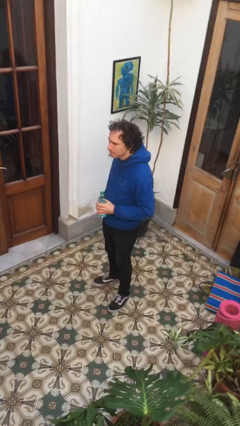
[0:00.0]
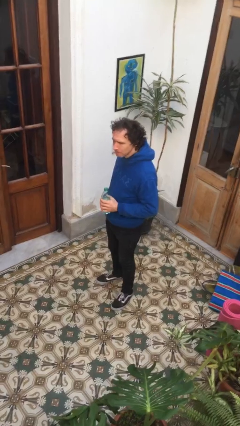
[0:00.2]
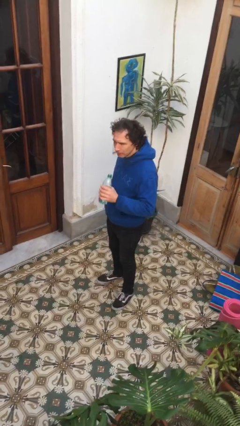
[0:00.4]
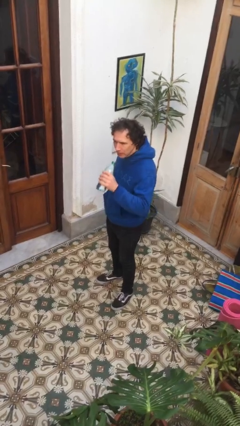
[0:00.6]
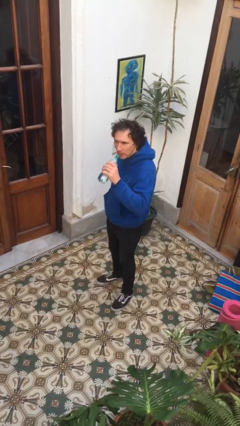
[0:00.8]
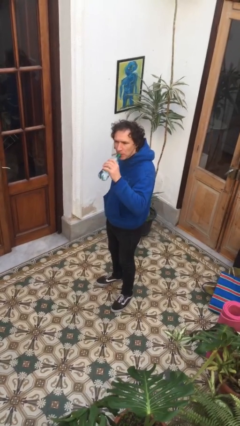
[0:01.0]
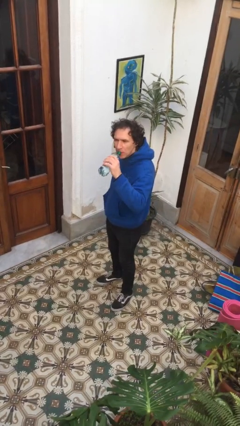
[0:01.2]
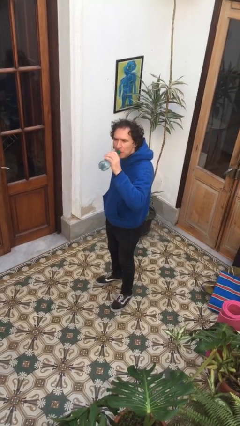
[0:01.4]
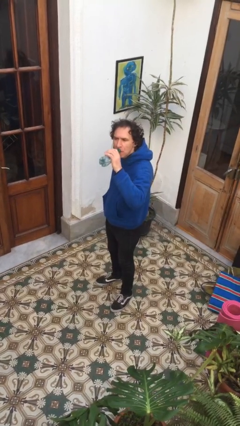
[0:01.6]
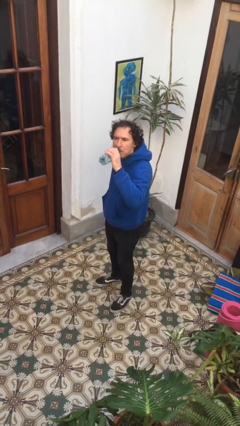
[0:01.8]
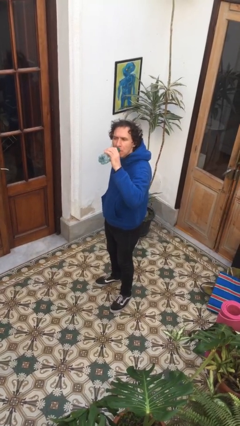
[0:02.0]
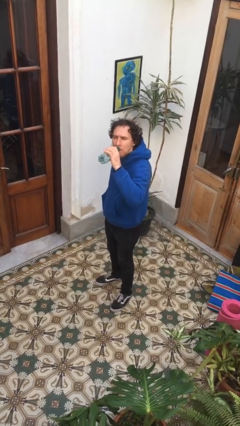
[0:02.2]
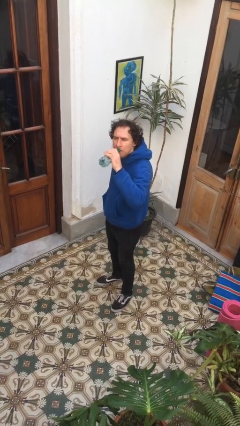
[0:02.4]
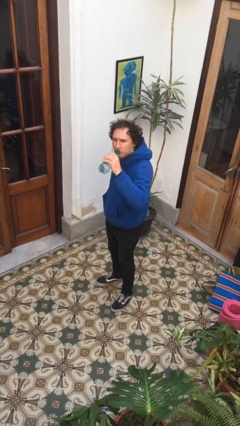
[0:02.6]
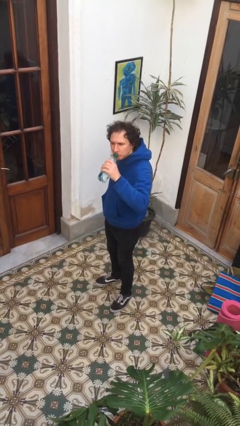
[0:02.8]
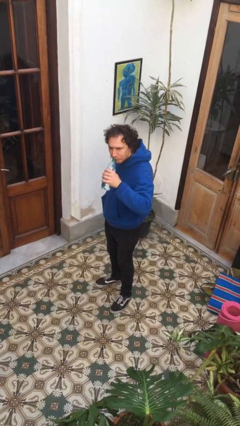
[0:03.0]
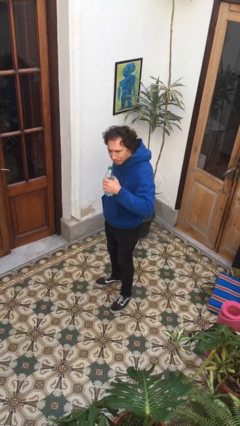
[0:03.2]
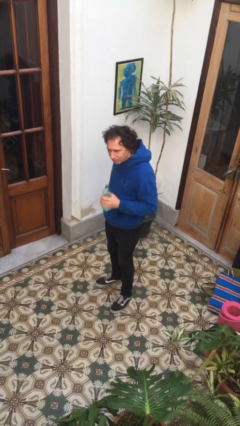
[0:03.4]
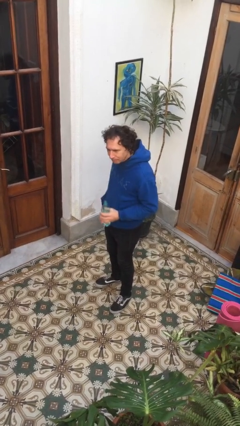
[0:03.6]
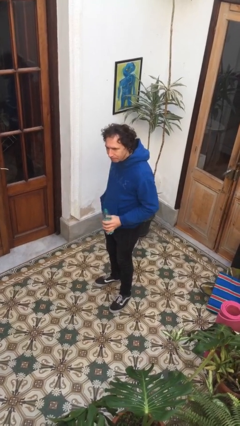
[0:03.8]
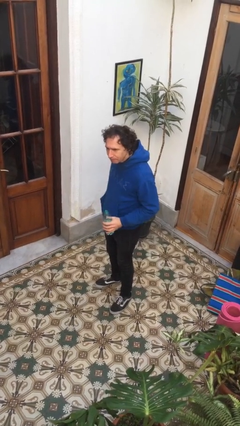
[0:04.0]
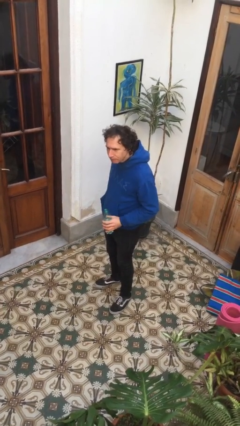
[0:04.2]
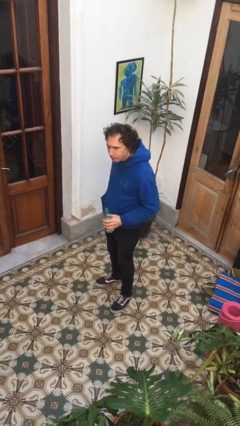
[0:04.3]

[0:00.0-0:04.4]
person drinks from bottle

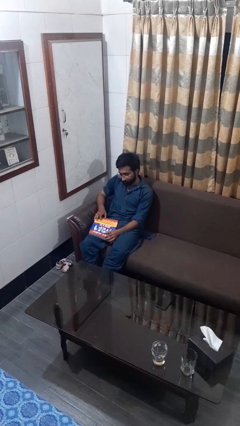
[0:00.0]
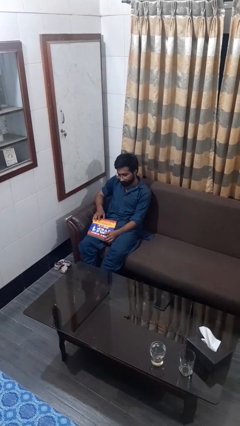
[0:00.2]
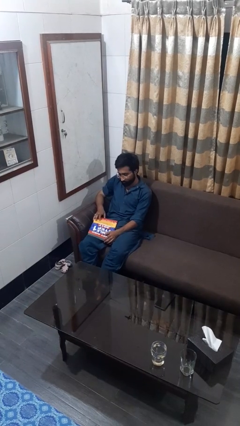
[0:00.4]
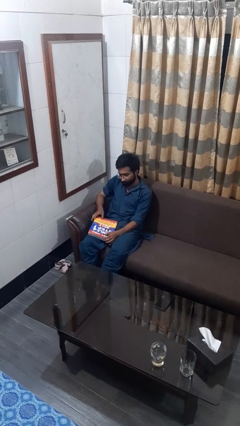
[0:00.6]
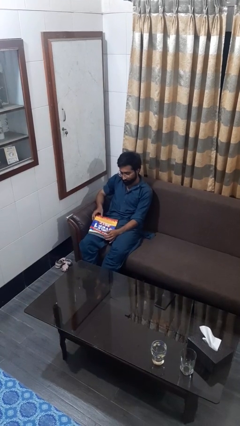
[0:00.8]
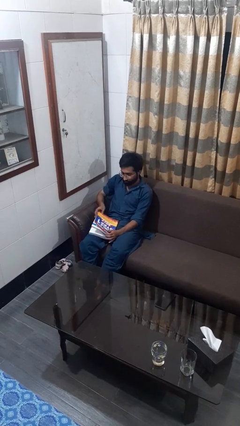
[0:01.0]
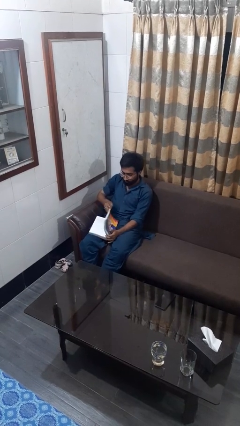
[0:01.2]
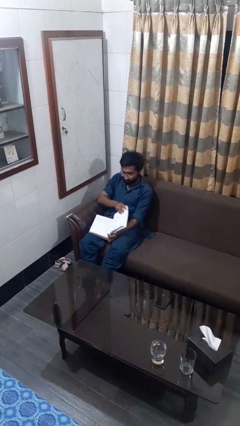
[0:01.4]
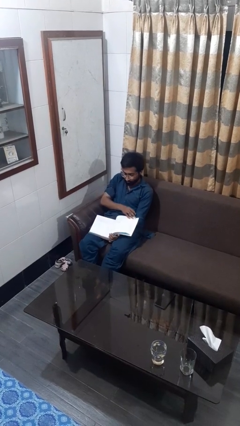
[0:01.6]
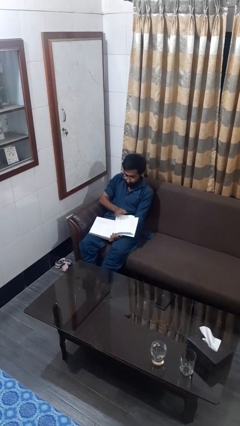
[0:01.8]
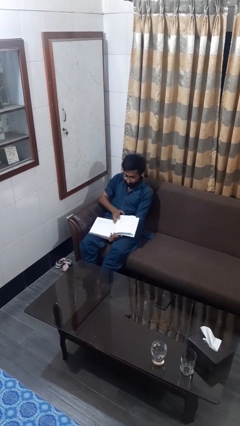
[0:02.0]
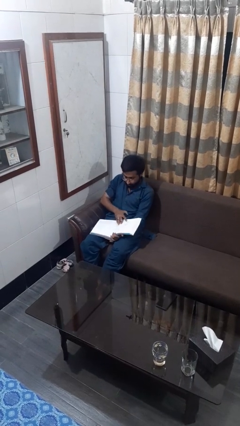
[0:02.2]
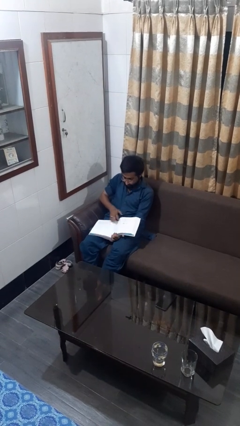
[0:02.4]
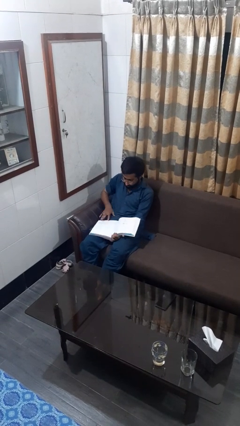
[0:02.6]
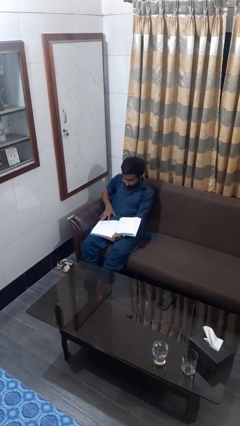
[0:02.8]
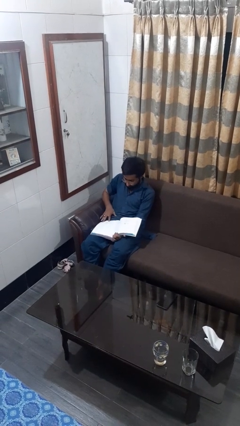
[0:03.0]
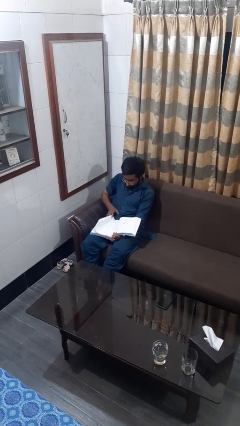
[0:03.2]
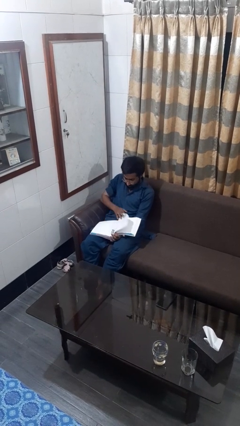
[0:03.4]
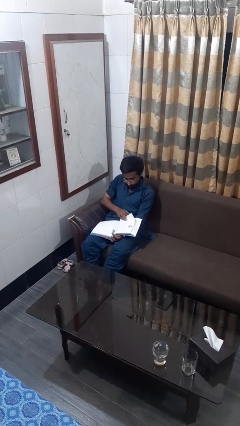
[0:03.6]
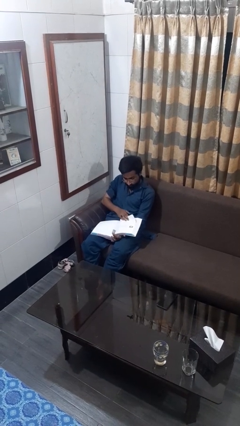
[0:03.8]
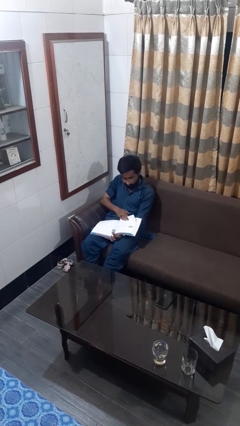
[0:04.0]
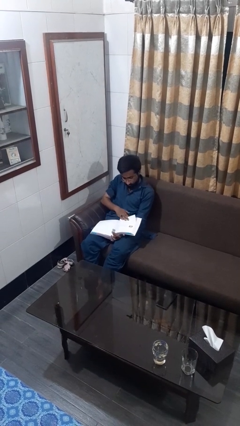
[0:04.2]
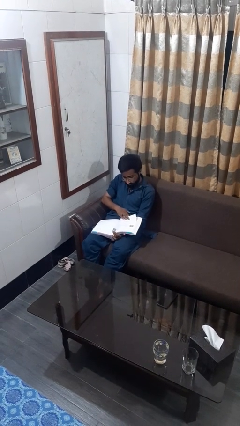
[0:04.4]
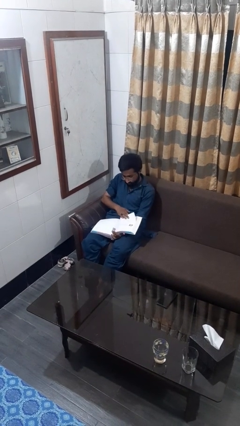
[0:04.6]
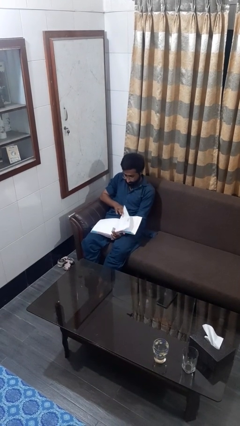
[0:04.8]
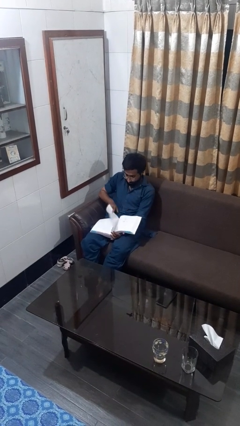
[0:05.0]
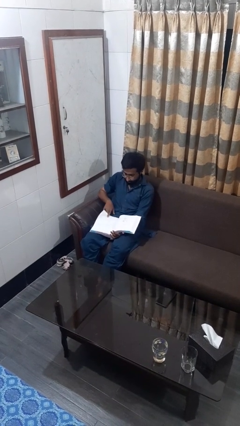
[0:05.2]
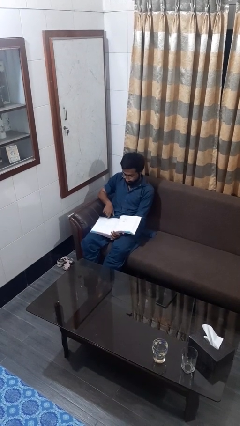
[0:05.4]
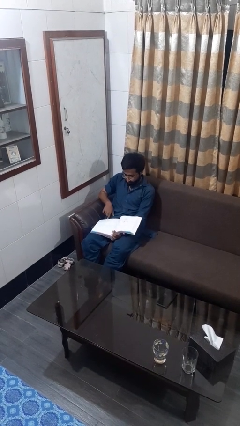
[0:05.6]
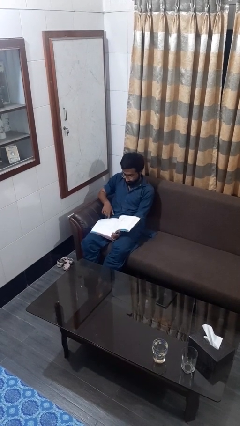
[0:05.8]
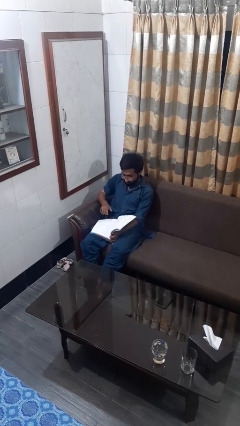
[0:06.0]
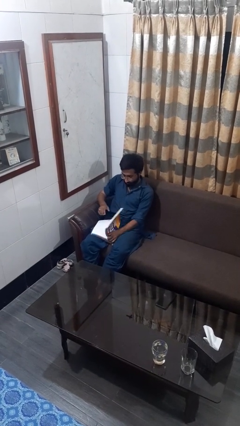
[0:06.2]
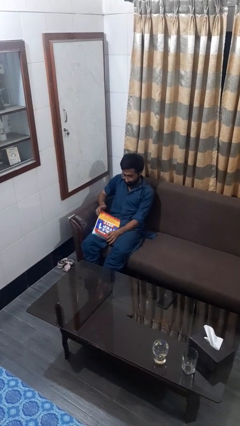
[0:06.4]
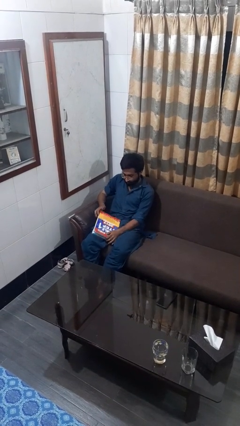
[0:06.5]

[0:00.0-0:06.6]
person reads book

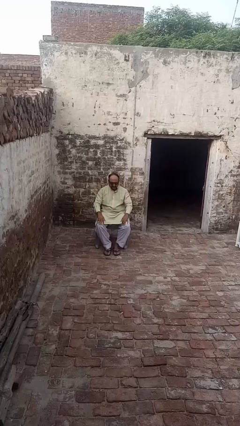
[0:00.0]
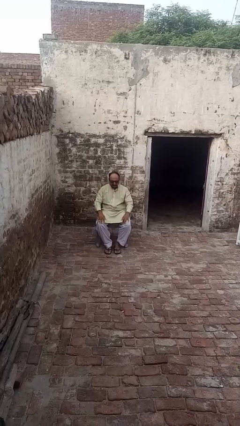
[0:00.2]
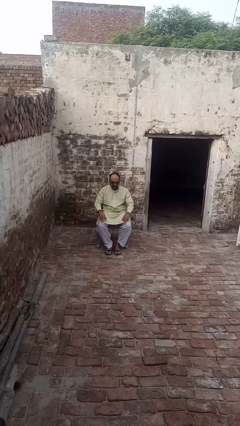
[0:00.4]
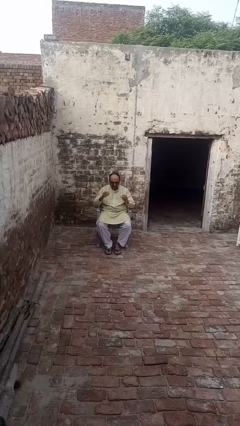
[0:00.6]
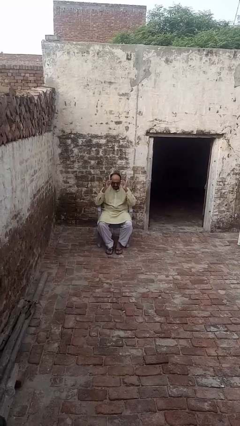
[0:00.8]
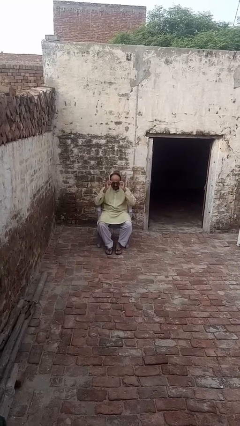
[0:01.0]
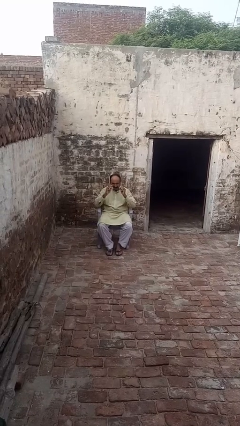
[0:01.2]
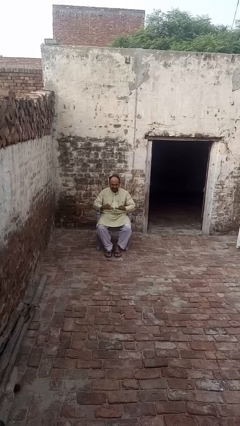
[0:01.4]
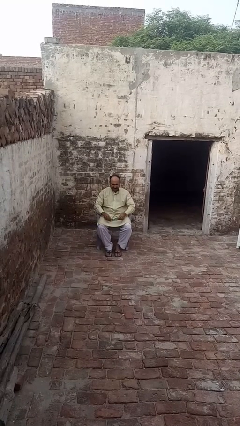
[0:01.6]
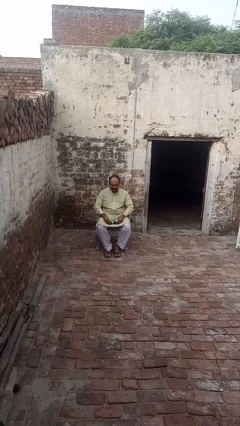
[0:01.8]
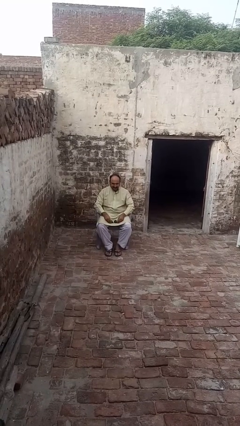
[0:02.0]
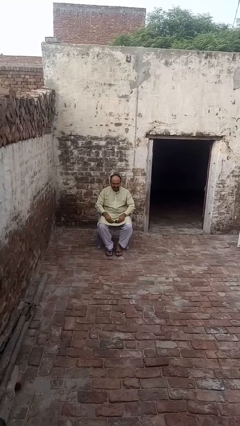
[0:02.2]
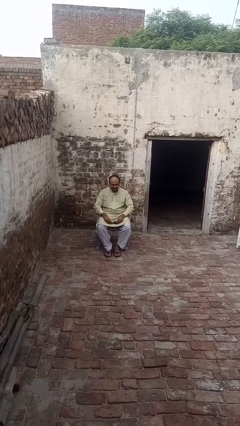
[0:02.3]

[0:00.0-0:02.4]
person takes off sunglasses

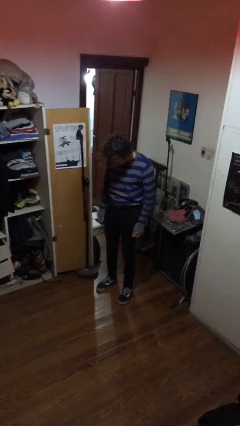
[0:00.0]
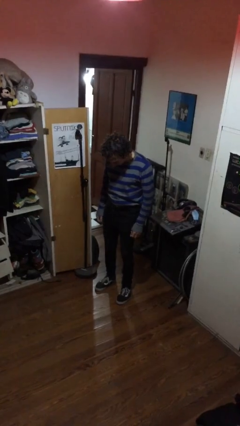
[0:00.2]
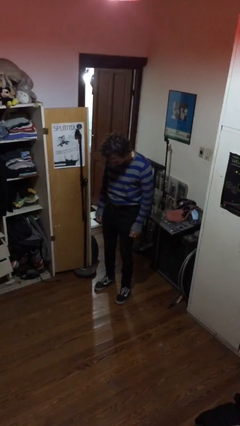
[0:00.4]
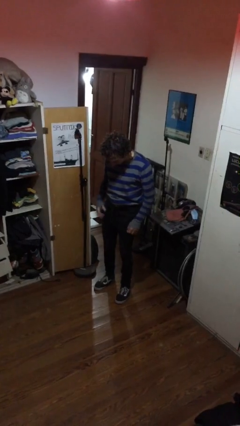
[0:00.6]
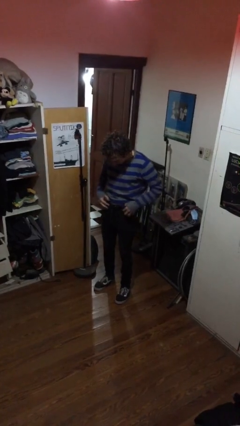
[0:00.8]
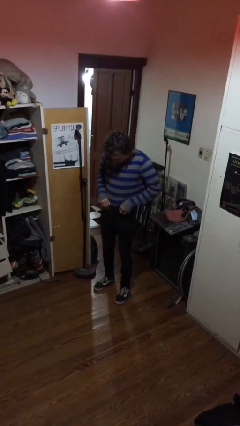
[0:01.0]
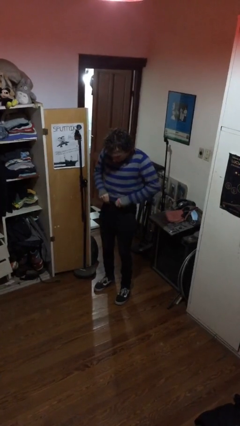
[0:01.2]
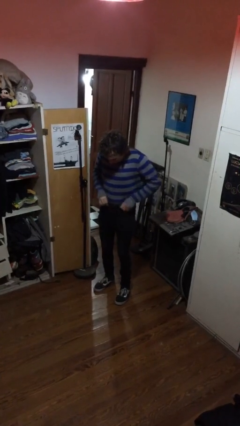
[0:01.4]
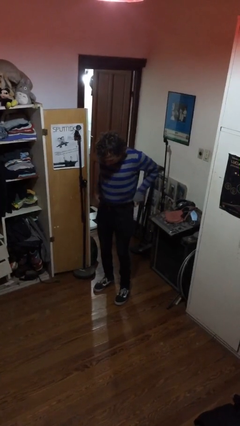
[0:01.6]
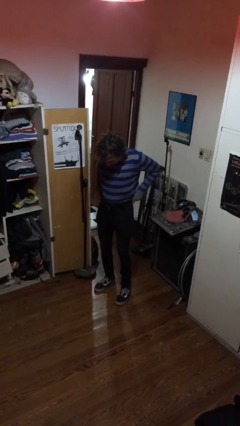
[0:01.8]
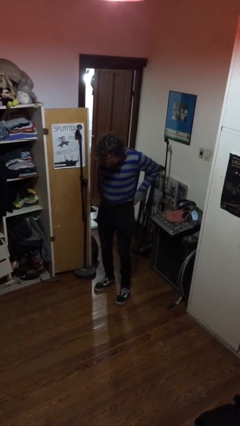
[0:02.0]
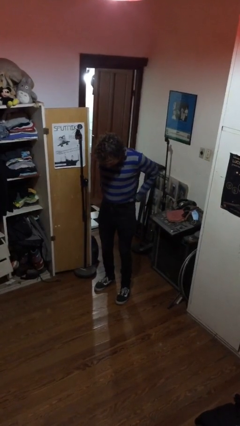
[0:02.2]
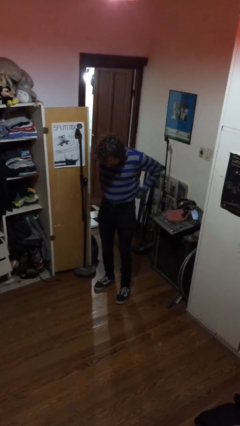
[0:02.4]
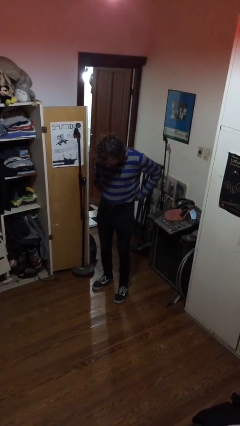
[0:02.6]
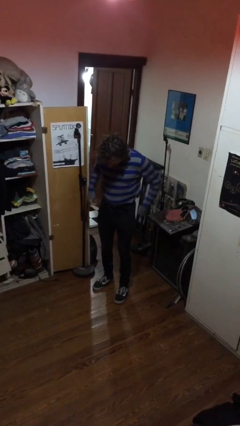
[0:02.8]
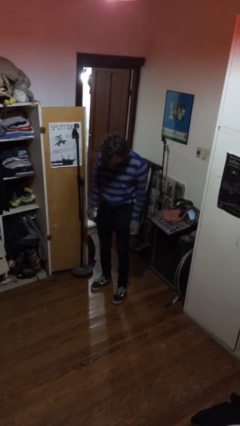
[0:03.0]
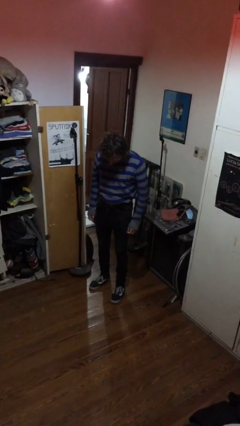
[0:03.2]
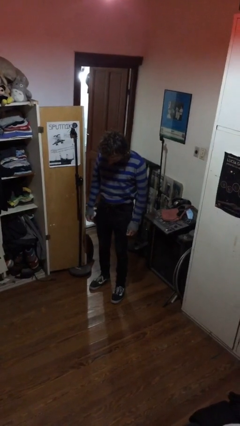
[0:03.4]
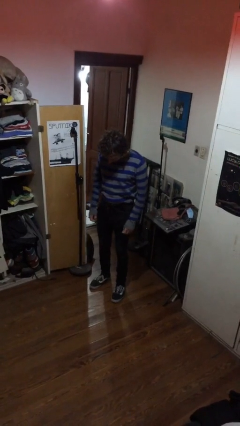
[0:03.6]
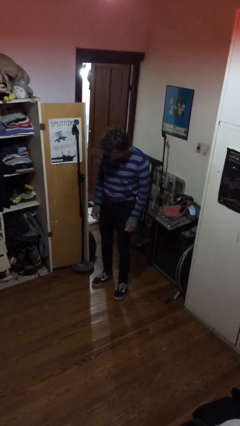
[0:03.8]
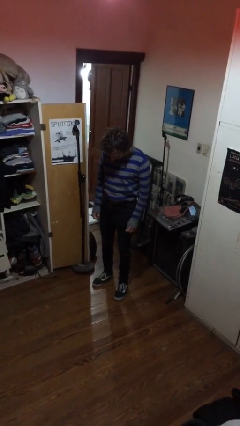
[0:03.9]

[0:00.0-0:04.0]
person hikes up pants
